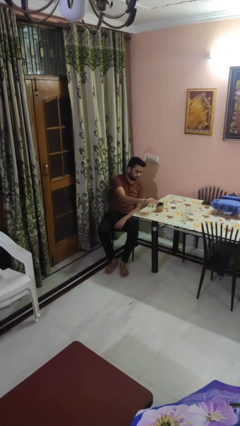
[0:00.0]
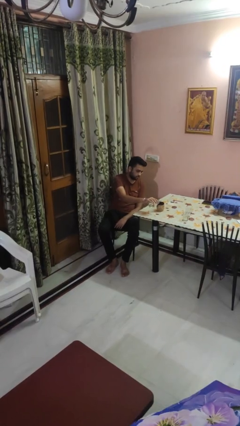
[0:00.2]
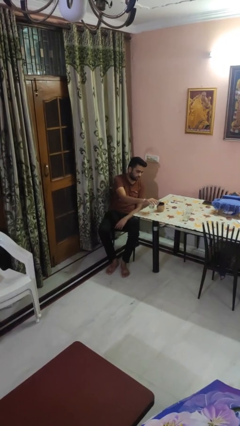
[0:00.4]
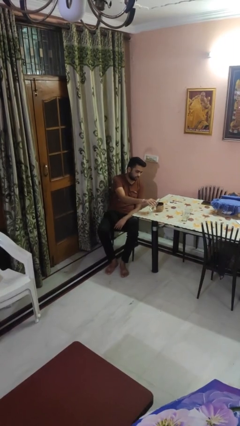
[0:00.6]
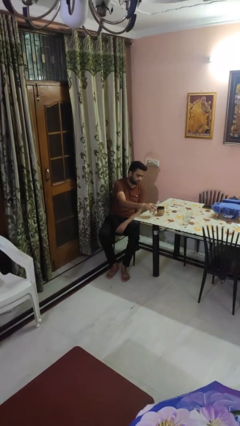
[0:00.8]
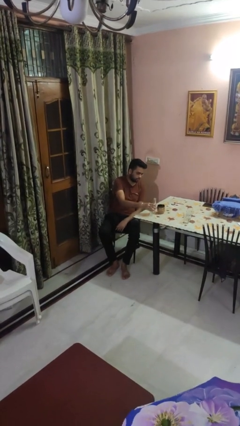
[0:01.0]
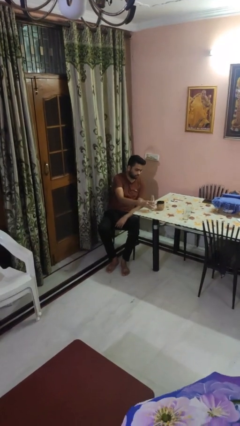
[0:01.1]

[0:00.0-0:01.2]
person pours liquid into cup

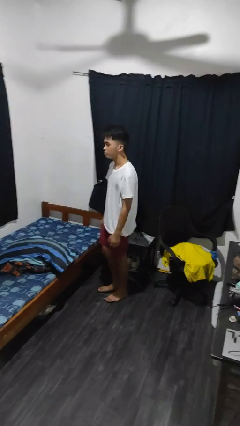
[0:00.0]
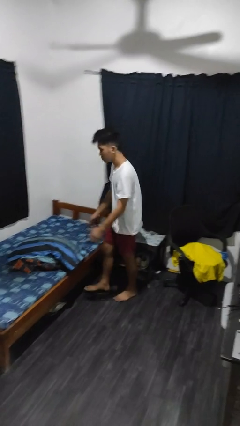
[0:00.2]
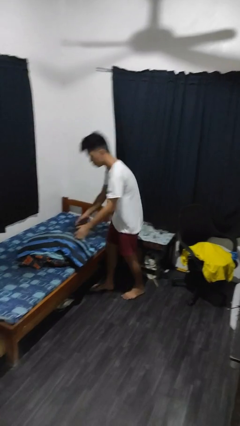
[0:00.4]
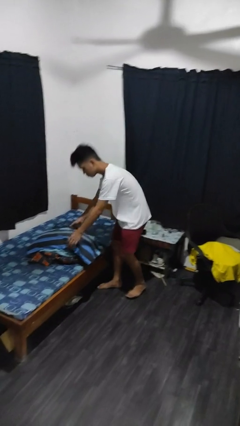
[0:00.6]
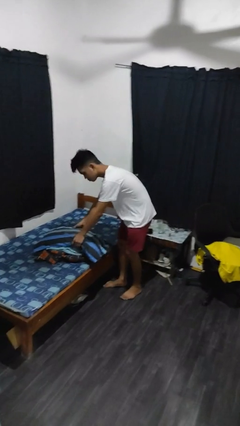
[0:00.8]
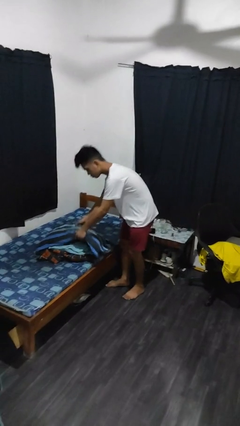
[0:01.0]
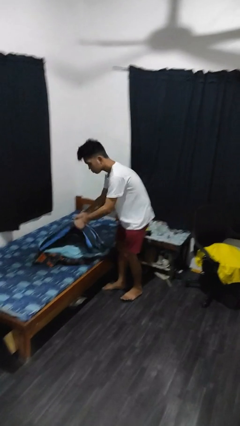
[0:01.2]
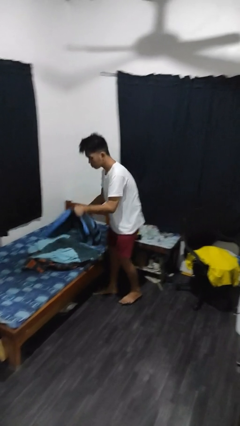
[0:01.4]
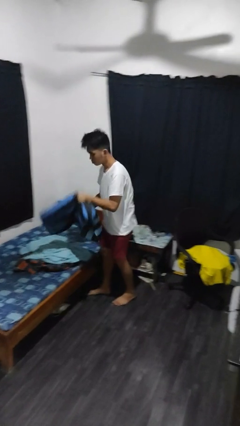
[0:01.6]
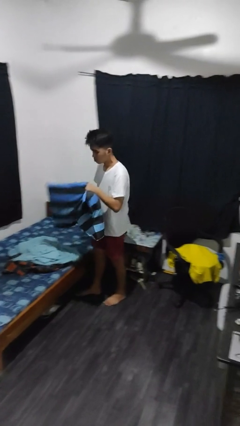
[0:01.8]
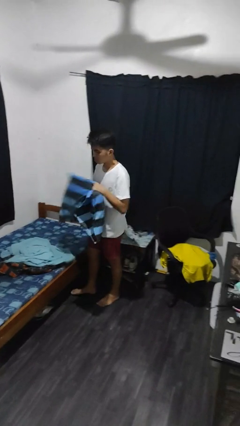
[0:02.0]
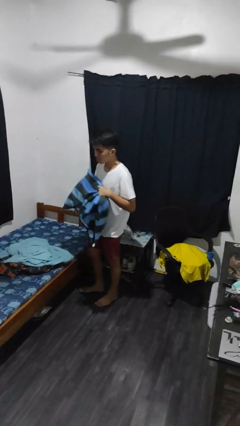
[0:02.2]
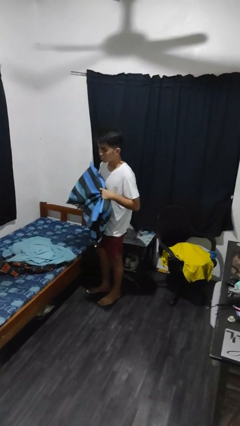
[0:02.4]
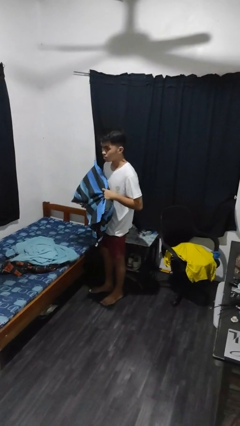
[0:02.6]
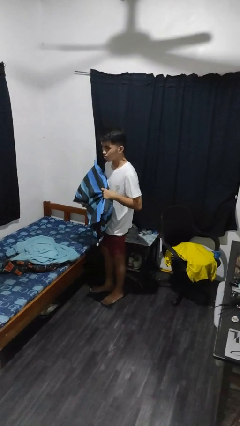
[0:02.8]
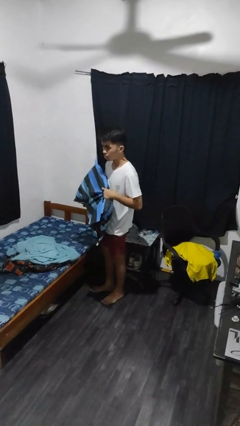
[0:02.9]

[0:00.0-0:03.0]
person picks up object from bed

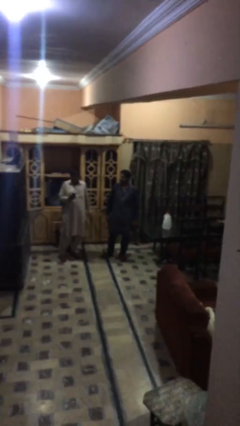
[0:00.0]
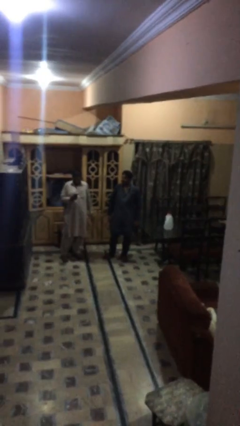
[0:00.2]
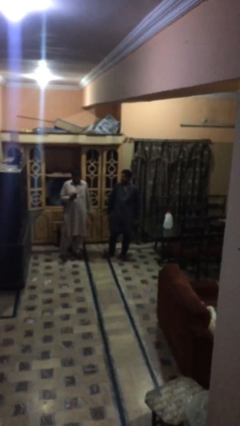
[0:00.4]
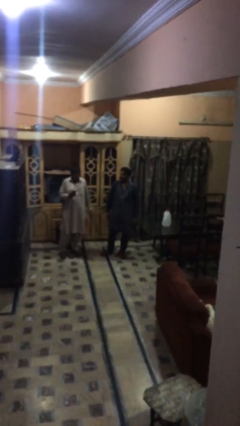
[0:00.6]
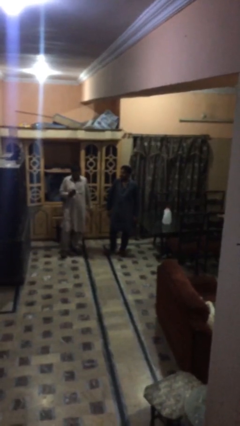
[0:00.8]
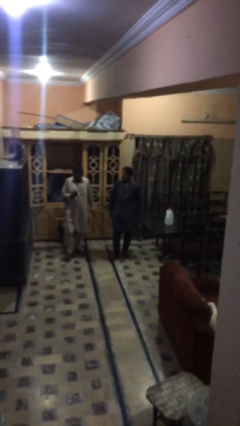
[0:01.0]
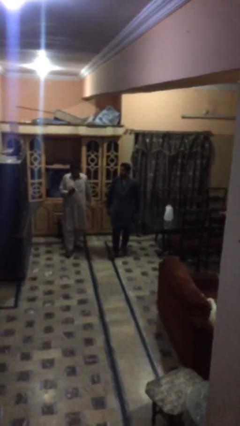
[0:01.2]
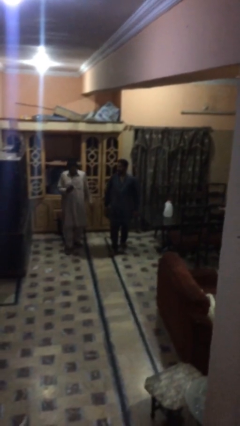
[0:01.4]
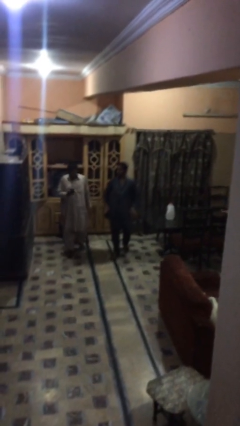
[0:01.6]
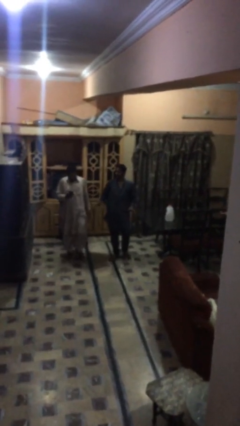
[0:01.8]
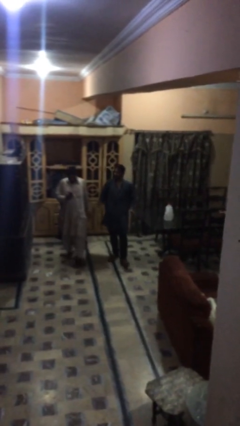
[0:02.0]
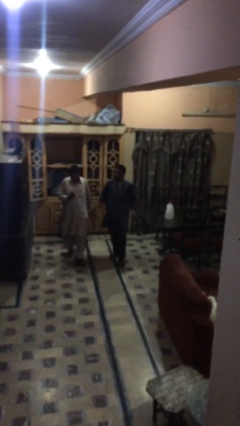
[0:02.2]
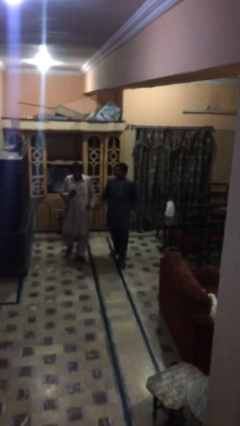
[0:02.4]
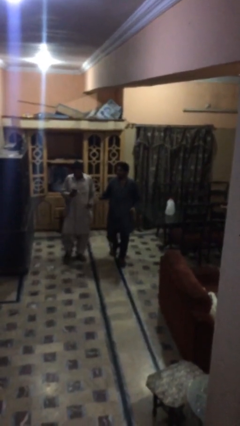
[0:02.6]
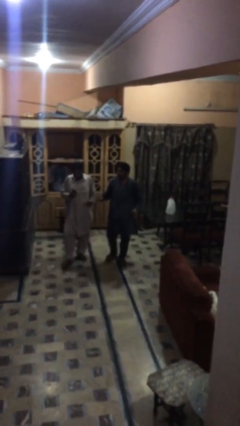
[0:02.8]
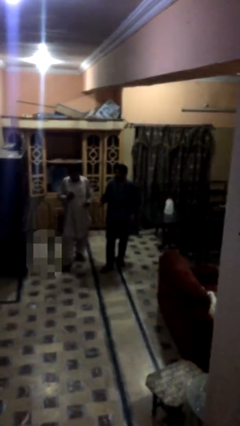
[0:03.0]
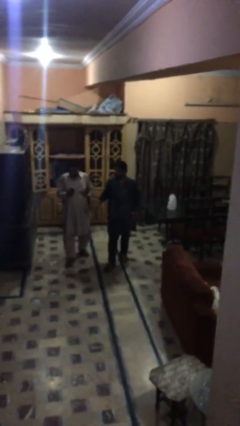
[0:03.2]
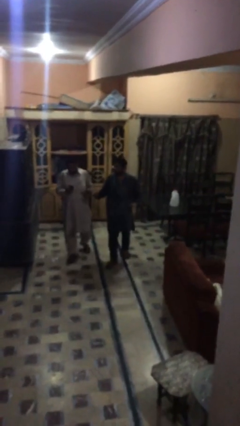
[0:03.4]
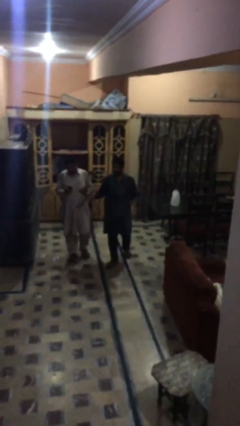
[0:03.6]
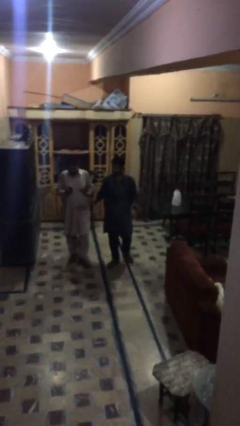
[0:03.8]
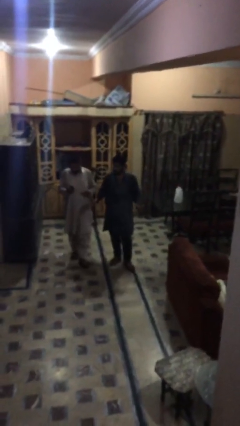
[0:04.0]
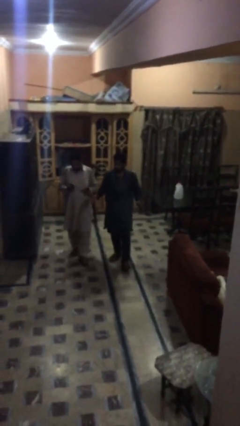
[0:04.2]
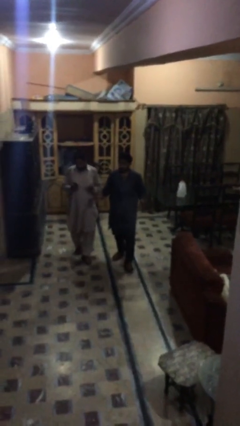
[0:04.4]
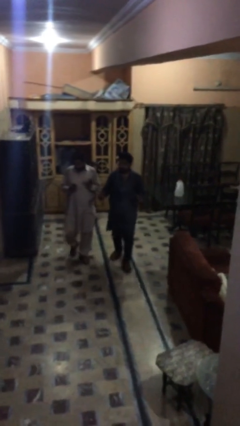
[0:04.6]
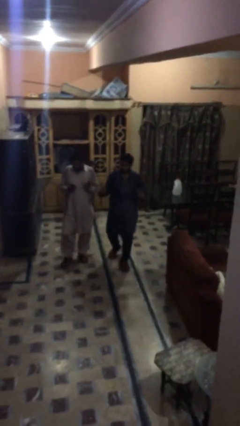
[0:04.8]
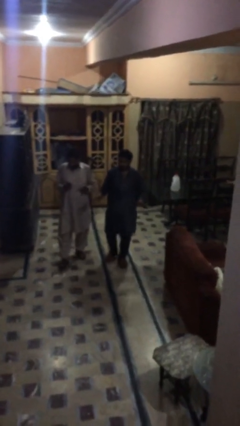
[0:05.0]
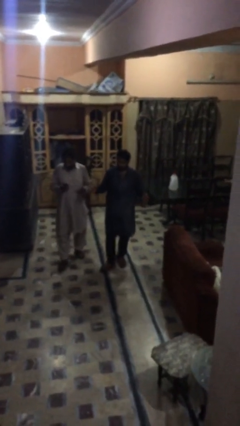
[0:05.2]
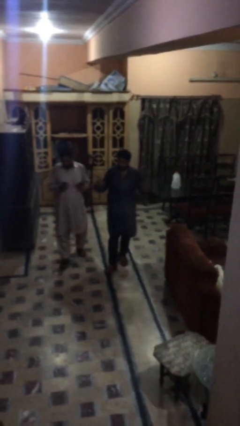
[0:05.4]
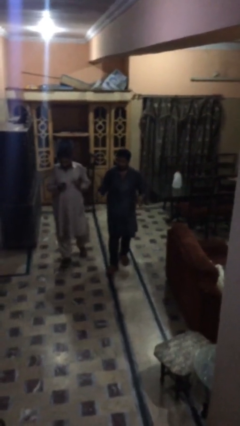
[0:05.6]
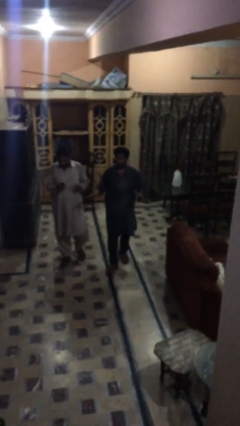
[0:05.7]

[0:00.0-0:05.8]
person talks to person

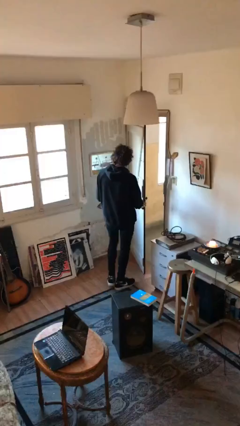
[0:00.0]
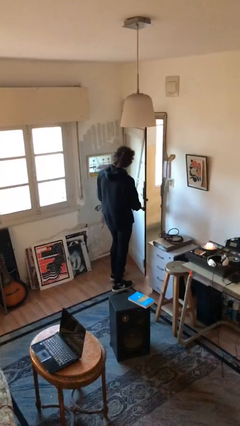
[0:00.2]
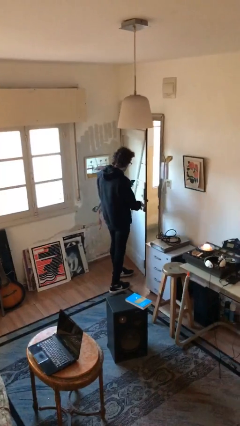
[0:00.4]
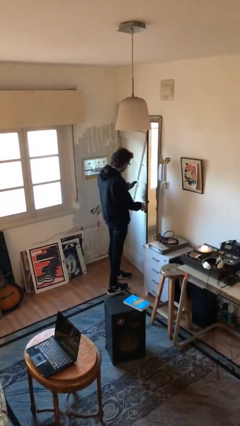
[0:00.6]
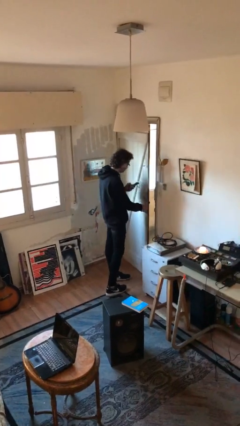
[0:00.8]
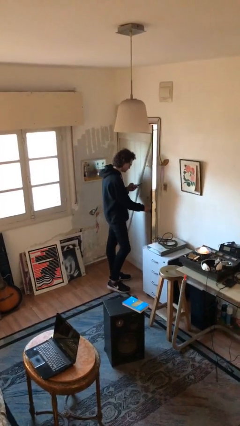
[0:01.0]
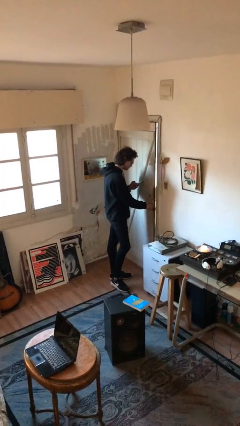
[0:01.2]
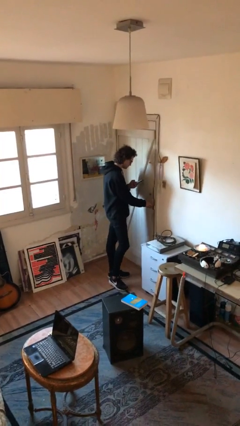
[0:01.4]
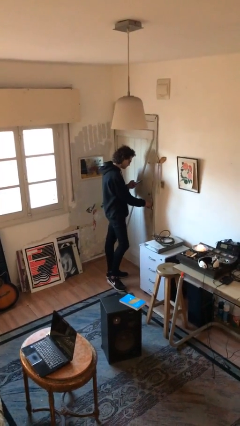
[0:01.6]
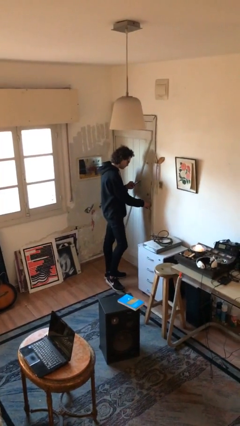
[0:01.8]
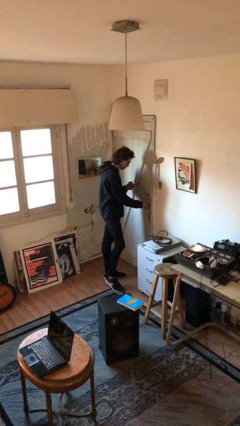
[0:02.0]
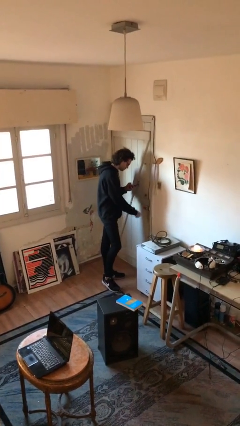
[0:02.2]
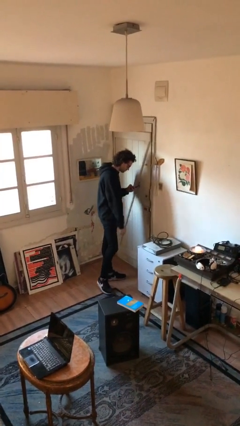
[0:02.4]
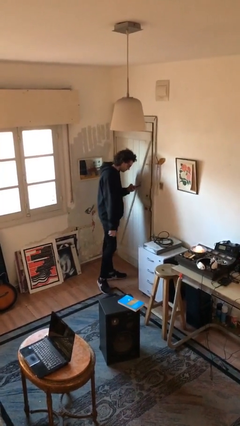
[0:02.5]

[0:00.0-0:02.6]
person closes facility door

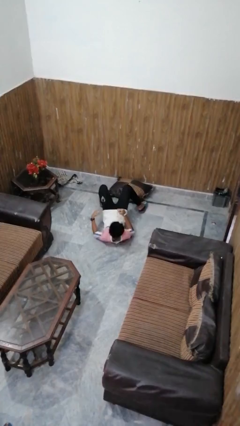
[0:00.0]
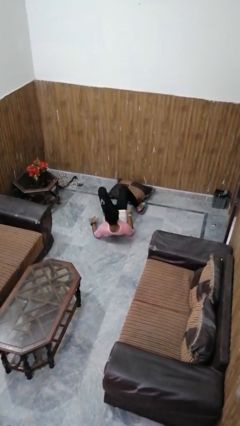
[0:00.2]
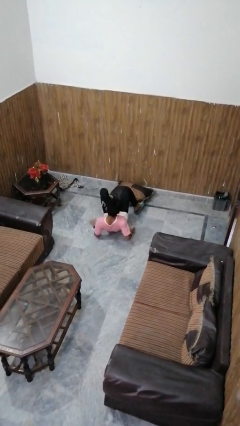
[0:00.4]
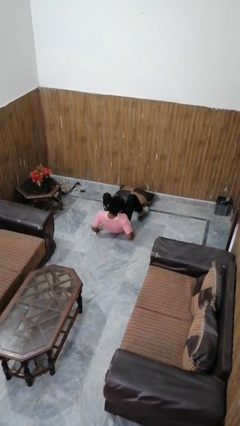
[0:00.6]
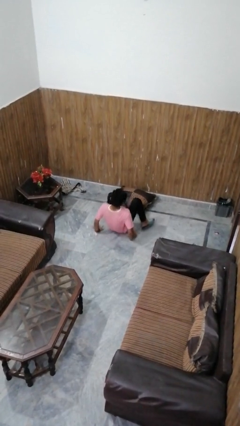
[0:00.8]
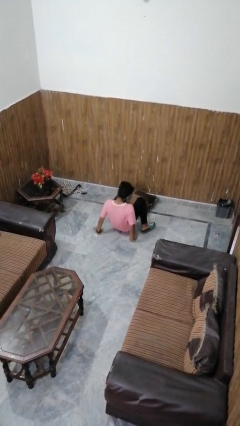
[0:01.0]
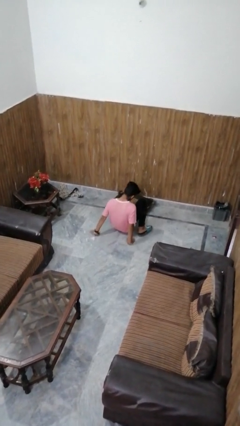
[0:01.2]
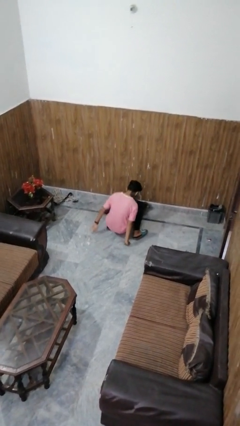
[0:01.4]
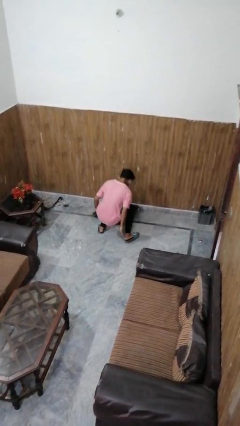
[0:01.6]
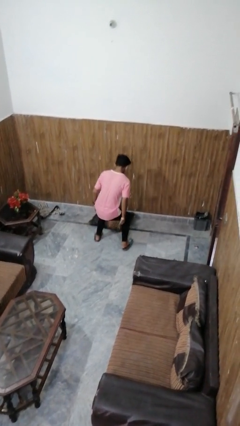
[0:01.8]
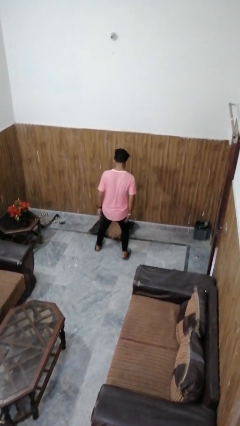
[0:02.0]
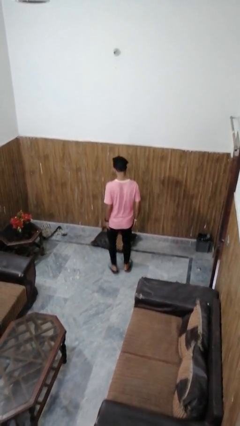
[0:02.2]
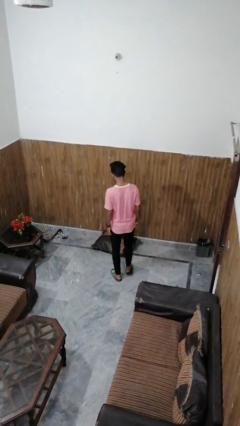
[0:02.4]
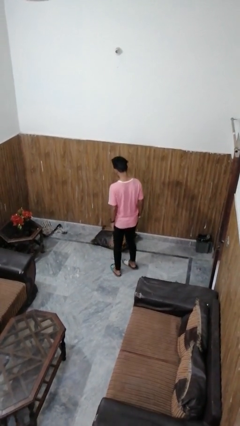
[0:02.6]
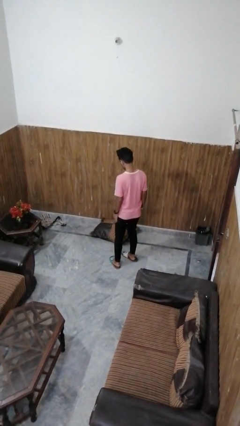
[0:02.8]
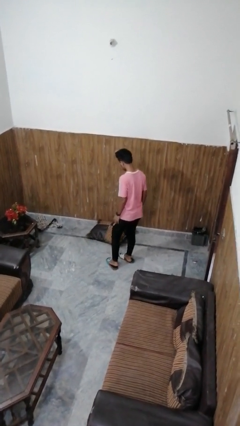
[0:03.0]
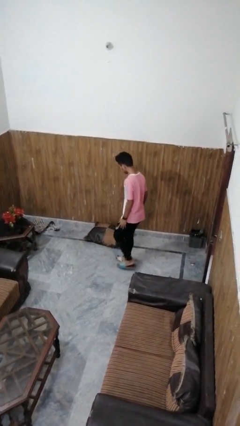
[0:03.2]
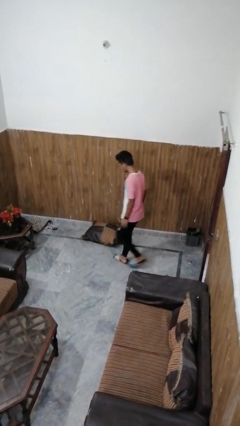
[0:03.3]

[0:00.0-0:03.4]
person stands up from floor

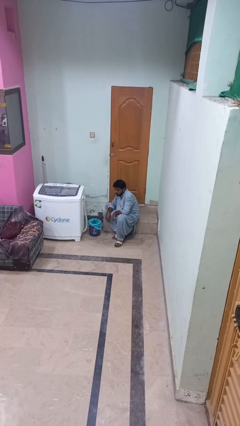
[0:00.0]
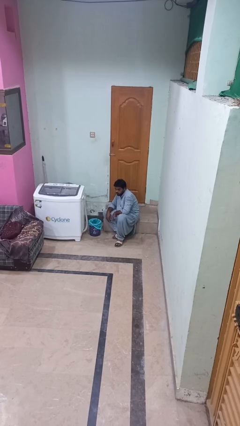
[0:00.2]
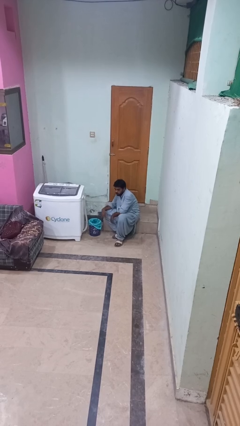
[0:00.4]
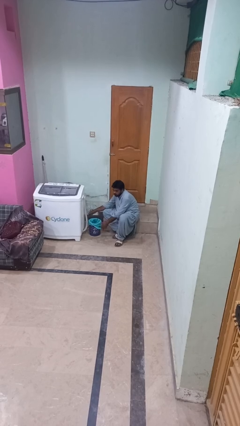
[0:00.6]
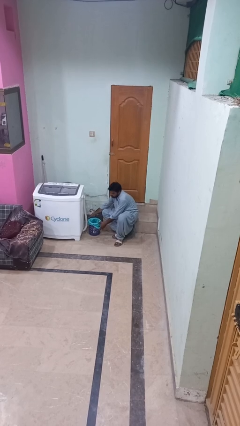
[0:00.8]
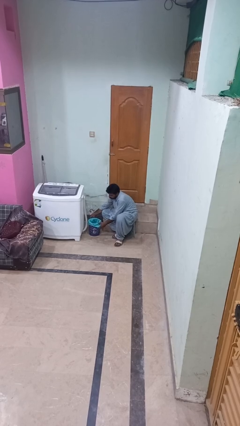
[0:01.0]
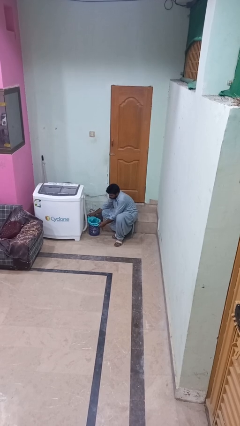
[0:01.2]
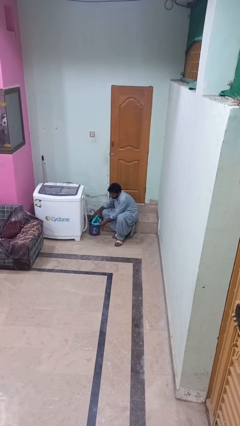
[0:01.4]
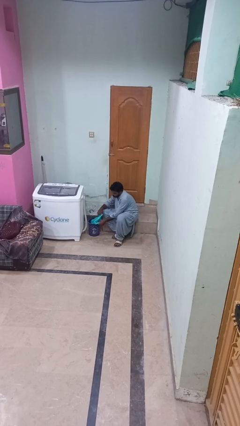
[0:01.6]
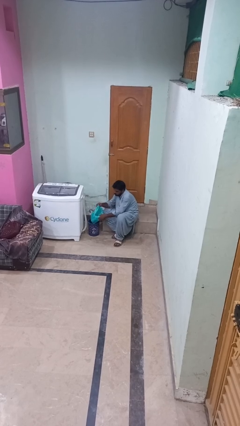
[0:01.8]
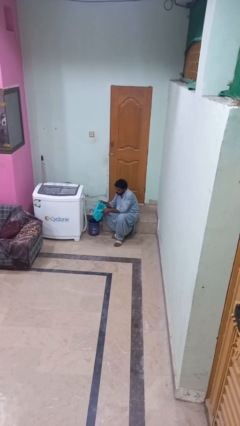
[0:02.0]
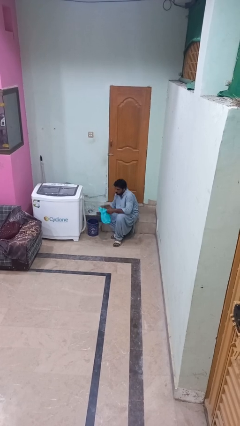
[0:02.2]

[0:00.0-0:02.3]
person removes trashbag from trashcan
